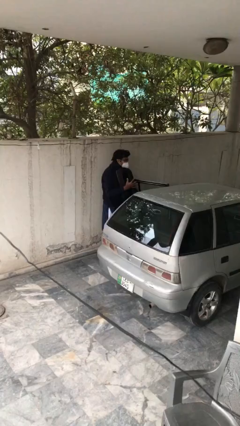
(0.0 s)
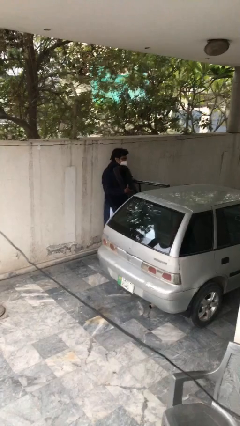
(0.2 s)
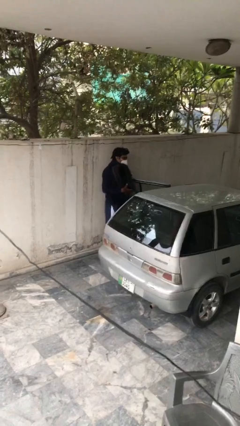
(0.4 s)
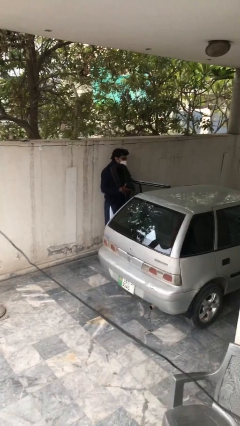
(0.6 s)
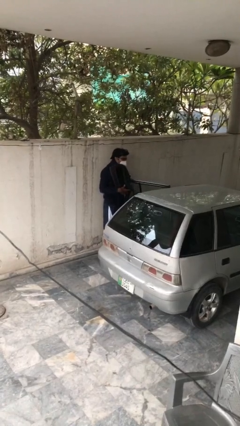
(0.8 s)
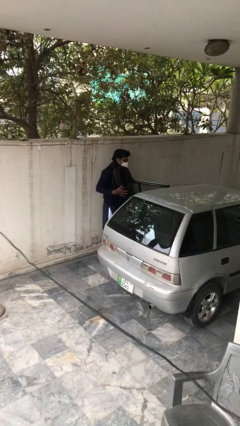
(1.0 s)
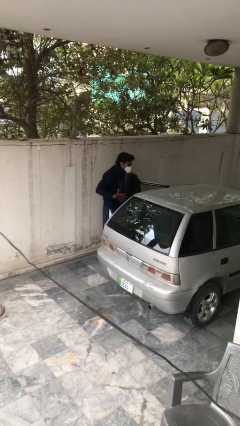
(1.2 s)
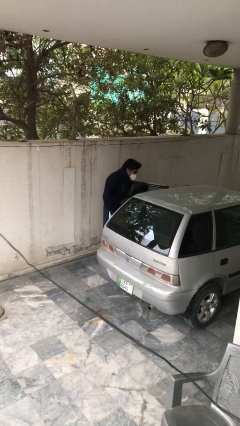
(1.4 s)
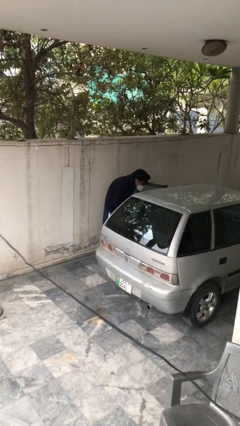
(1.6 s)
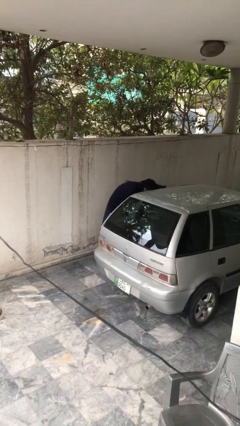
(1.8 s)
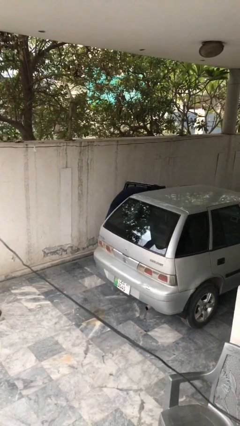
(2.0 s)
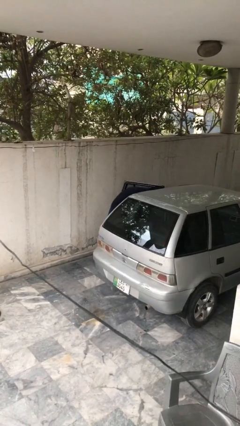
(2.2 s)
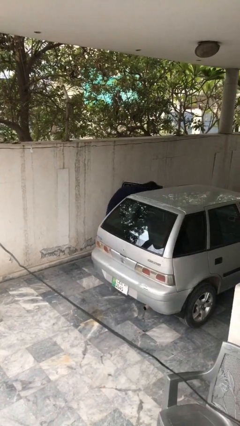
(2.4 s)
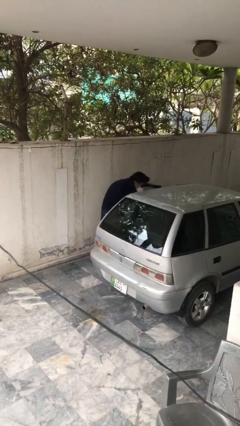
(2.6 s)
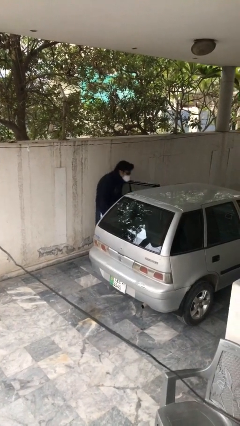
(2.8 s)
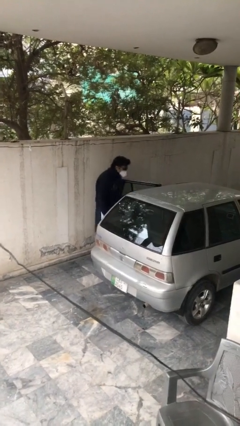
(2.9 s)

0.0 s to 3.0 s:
person loads car

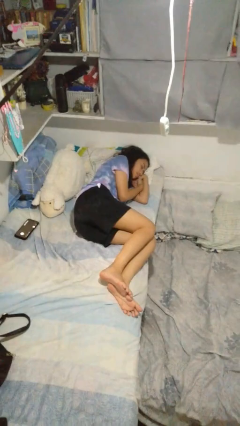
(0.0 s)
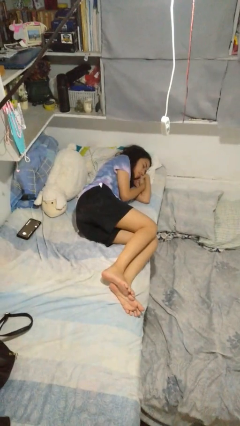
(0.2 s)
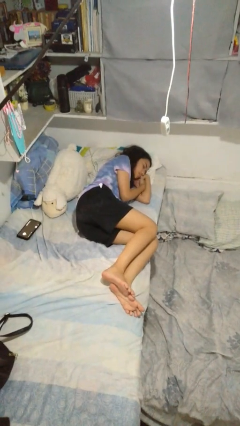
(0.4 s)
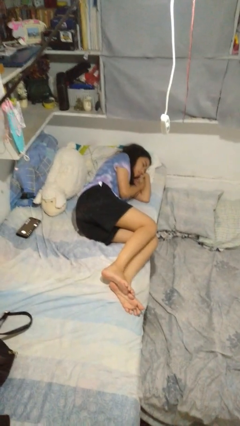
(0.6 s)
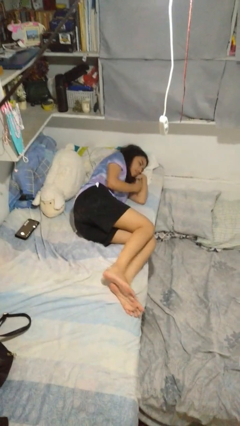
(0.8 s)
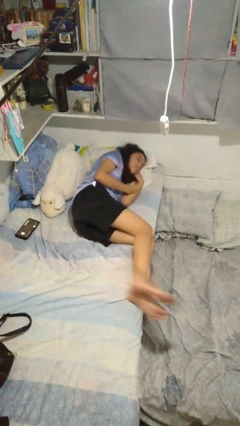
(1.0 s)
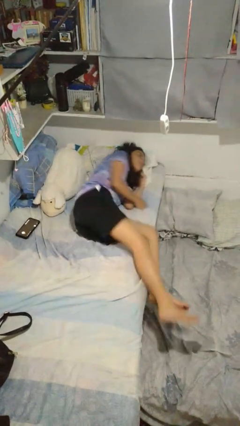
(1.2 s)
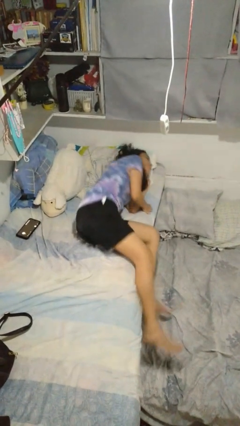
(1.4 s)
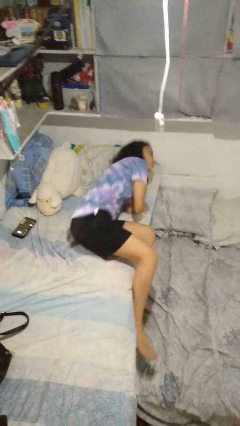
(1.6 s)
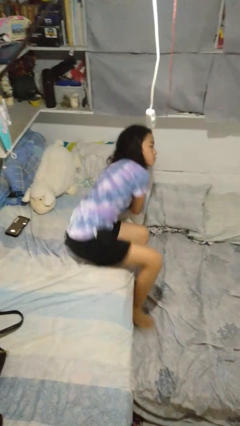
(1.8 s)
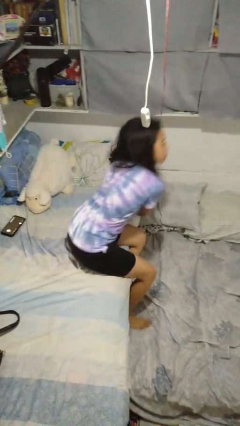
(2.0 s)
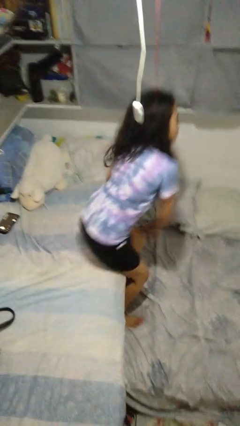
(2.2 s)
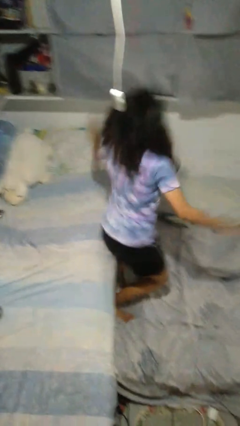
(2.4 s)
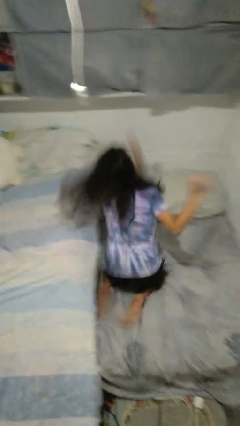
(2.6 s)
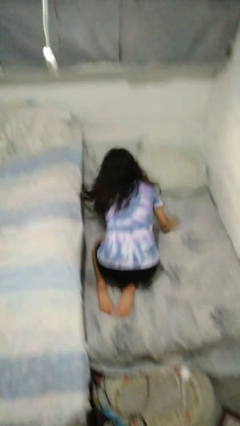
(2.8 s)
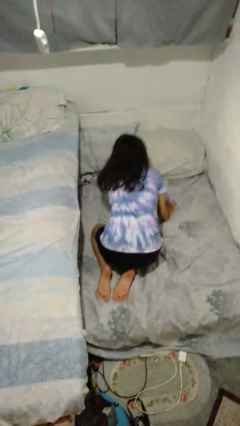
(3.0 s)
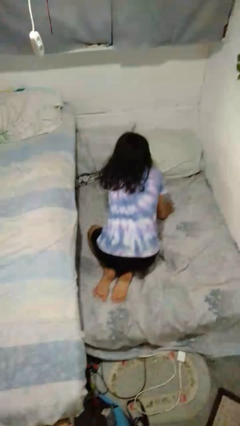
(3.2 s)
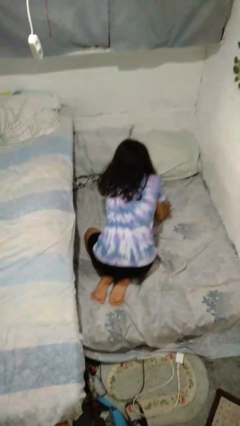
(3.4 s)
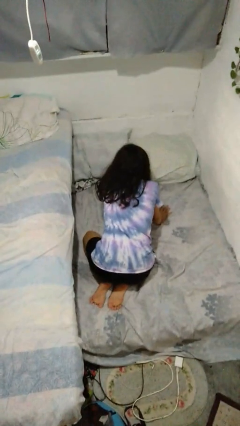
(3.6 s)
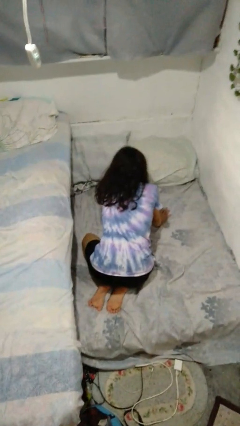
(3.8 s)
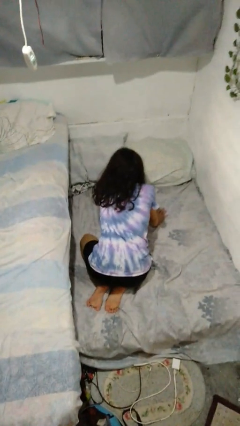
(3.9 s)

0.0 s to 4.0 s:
person falls from bed

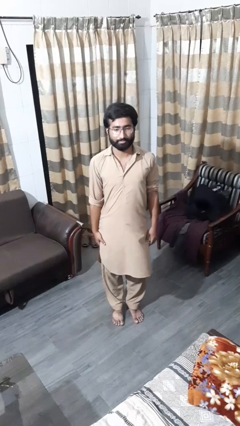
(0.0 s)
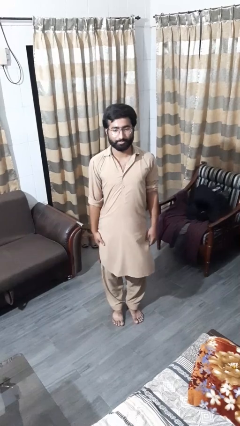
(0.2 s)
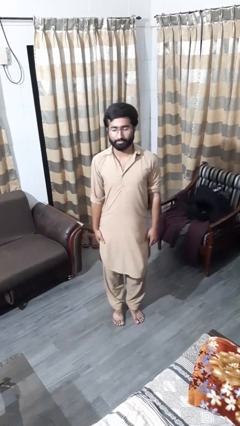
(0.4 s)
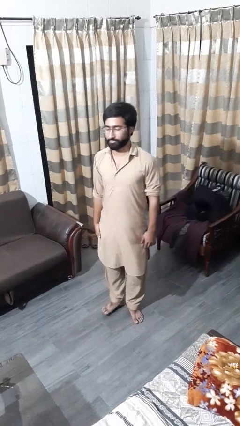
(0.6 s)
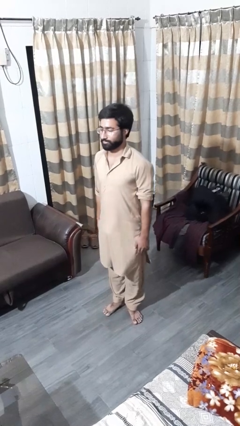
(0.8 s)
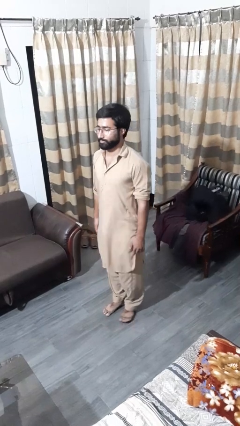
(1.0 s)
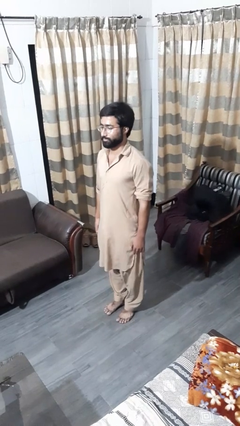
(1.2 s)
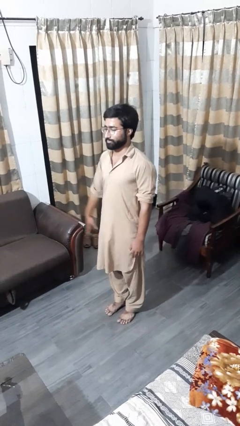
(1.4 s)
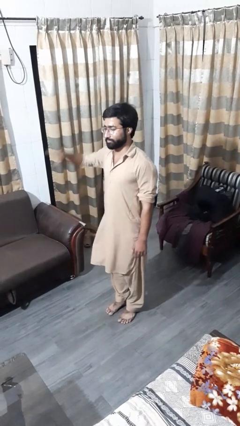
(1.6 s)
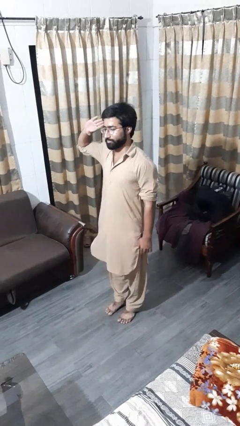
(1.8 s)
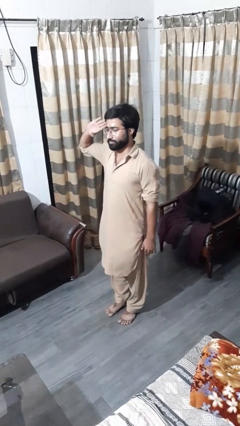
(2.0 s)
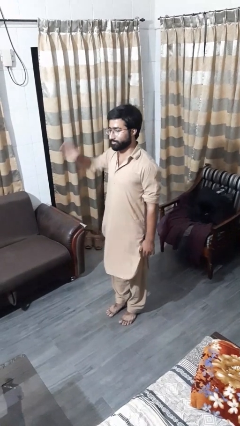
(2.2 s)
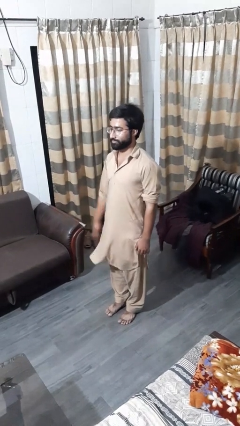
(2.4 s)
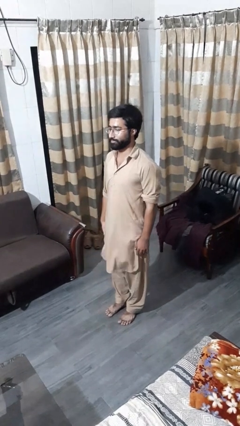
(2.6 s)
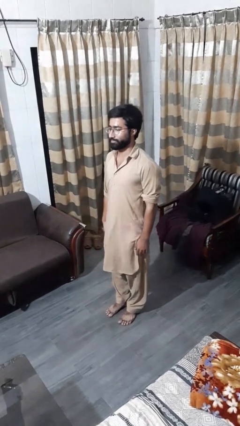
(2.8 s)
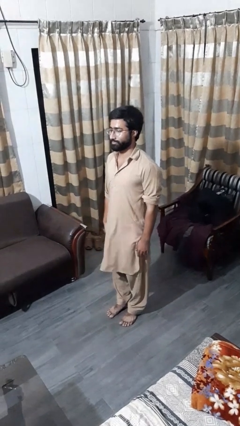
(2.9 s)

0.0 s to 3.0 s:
person salutes

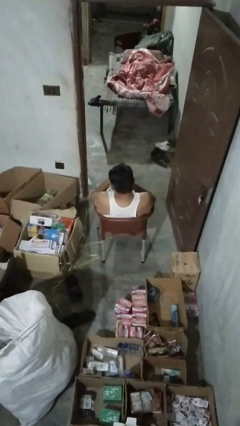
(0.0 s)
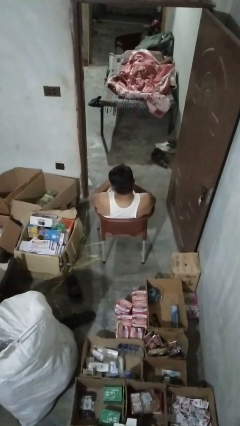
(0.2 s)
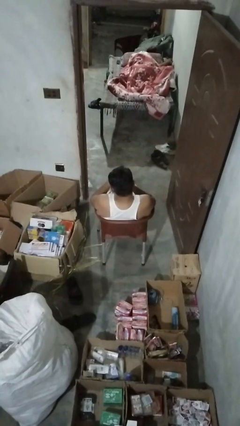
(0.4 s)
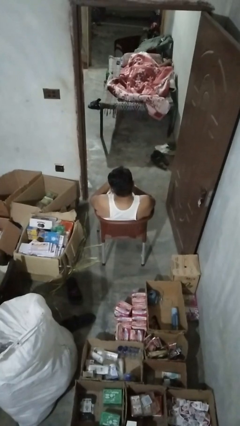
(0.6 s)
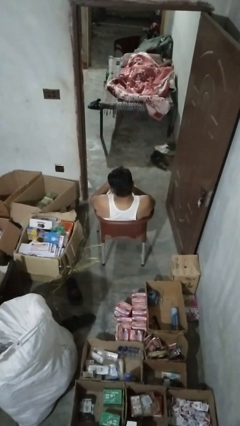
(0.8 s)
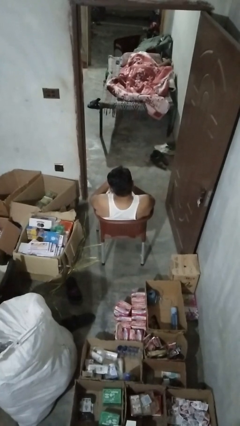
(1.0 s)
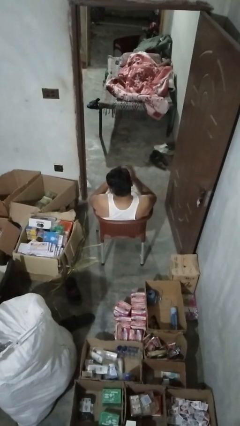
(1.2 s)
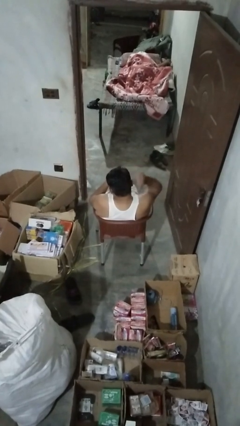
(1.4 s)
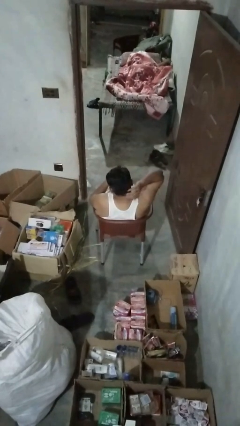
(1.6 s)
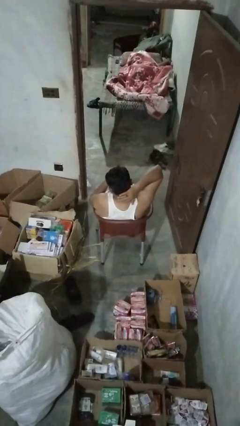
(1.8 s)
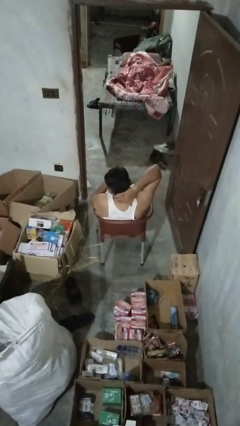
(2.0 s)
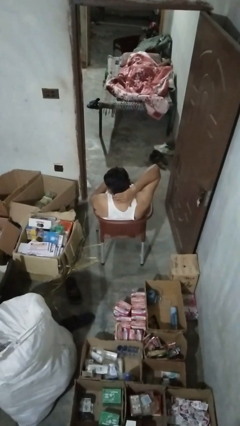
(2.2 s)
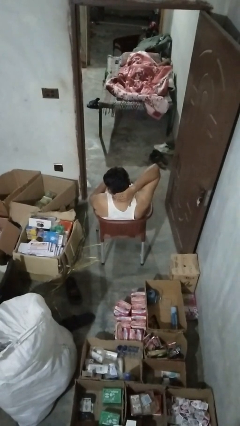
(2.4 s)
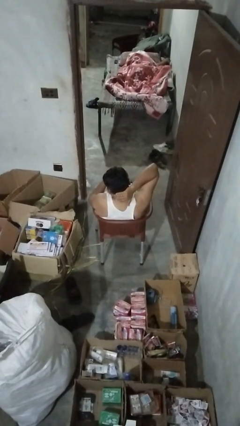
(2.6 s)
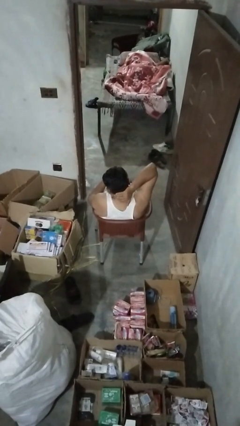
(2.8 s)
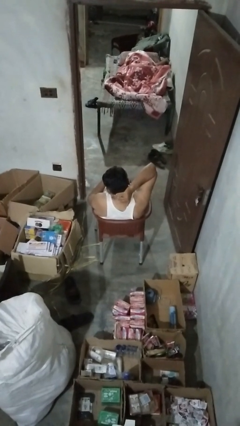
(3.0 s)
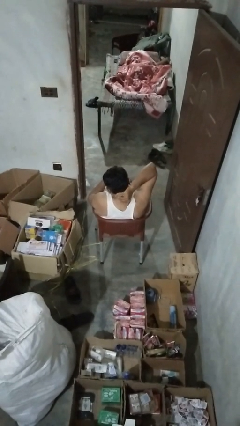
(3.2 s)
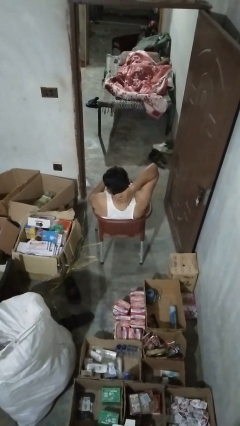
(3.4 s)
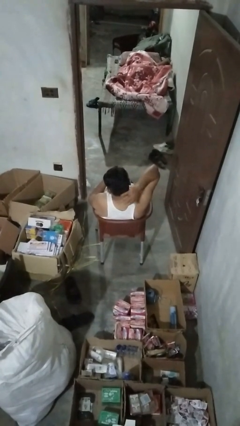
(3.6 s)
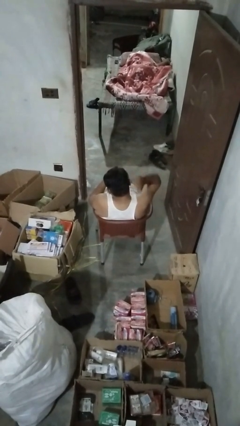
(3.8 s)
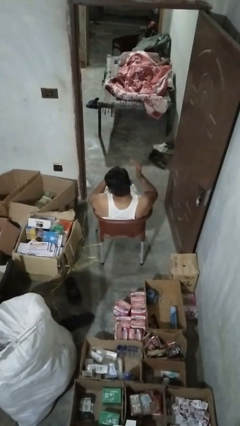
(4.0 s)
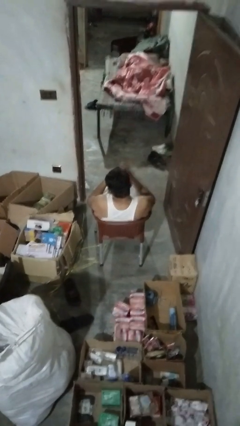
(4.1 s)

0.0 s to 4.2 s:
person rubs neck

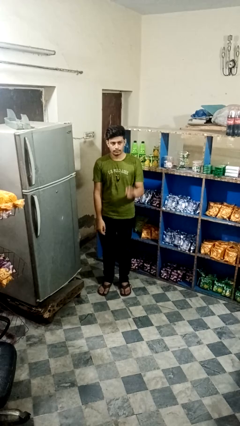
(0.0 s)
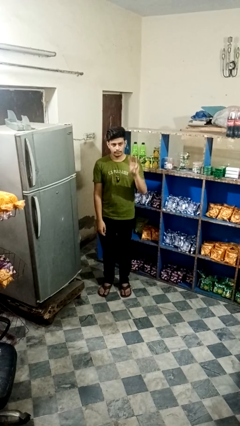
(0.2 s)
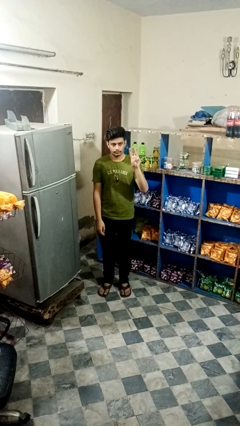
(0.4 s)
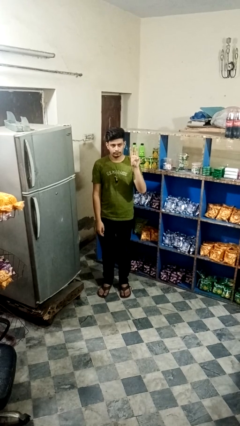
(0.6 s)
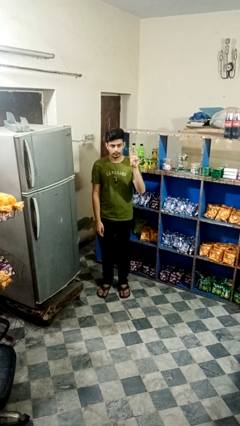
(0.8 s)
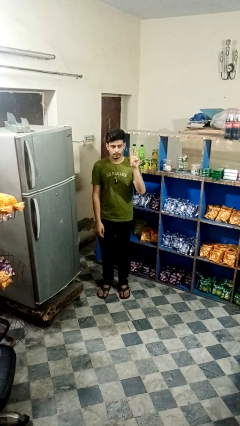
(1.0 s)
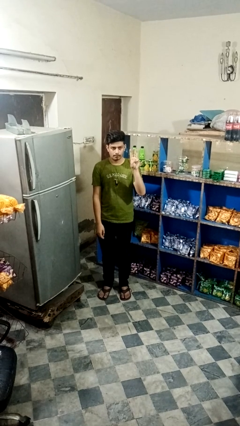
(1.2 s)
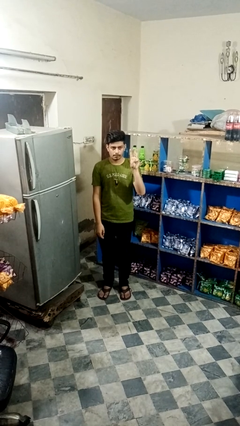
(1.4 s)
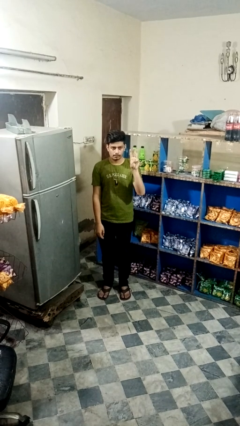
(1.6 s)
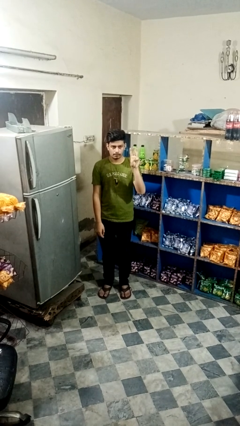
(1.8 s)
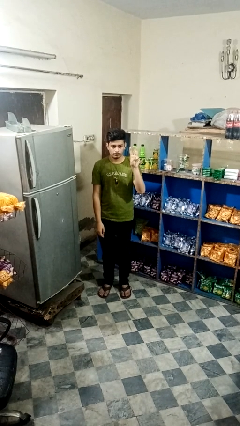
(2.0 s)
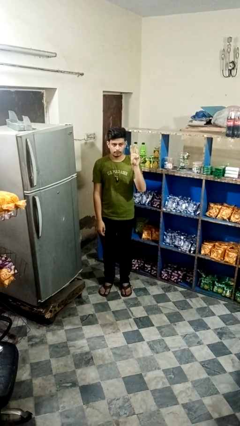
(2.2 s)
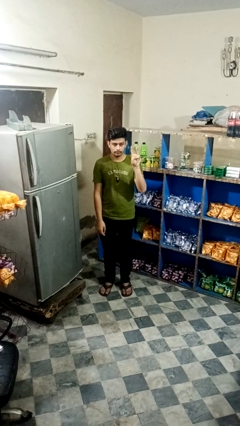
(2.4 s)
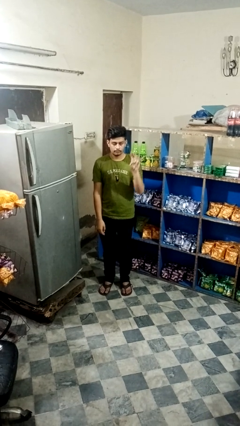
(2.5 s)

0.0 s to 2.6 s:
person gestures number three

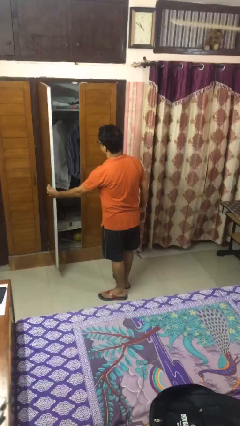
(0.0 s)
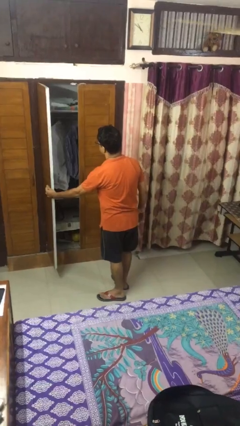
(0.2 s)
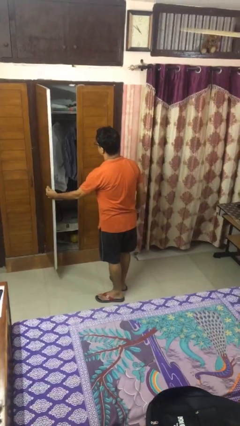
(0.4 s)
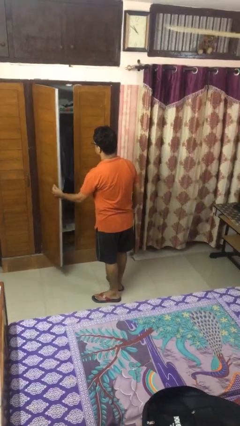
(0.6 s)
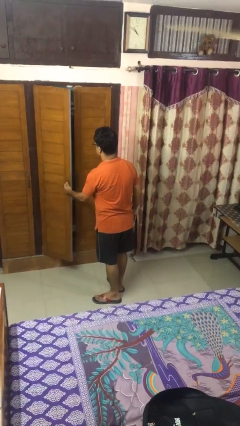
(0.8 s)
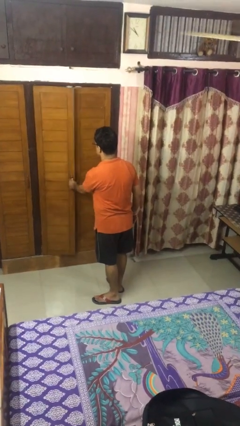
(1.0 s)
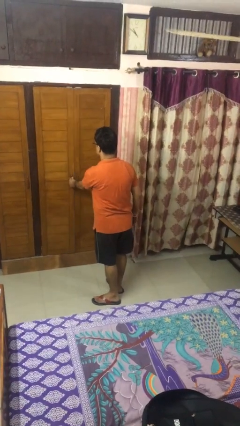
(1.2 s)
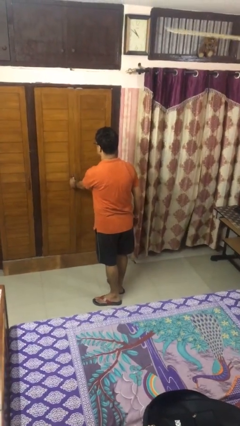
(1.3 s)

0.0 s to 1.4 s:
person closes closet door
